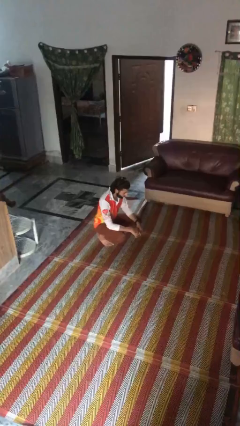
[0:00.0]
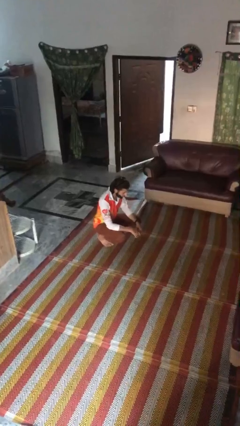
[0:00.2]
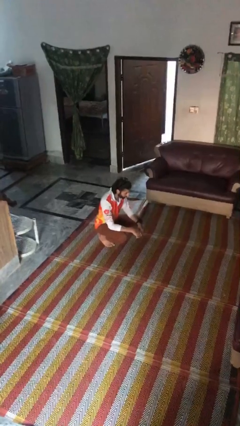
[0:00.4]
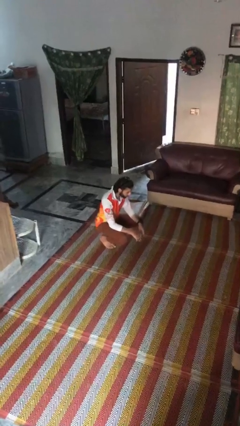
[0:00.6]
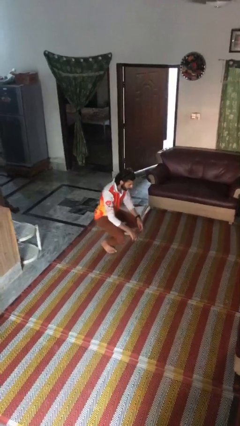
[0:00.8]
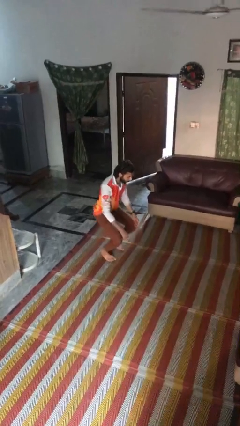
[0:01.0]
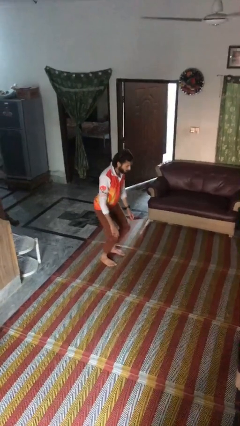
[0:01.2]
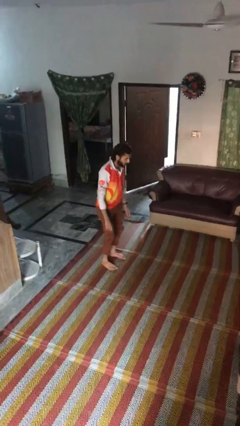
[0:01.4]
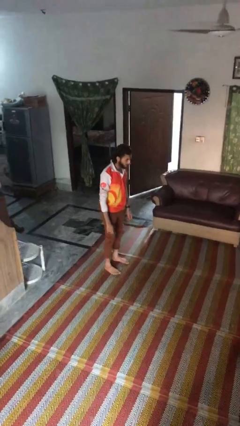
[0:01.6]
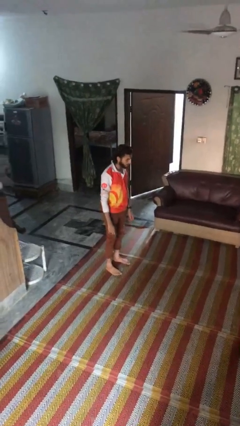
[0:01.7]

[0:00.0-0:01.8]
person stands up

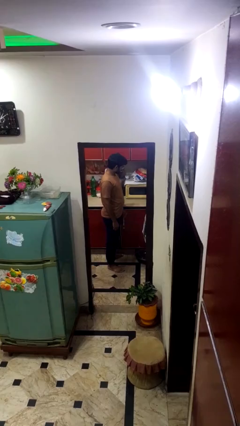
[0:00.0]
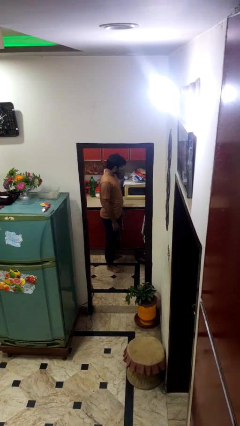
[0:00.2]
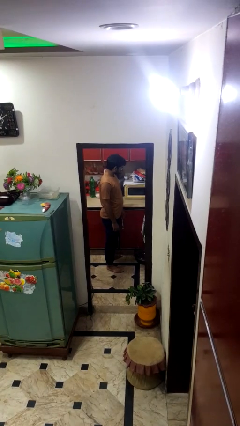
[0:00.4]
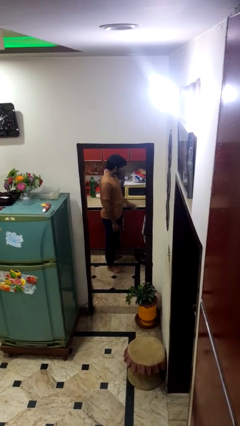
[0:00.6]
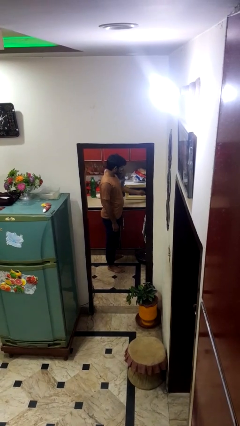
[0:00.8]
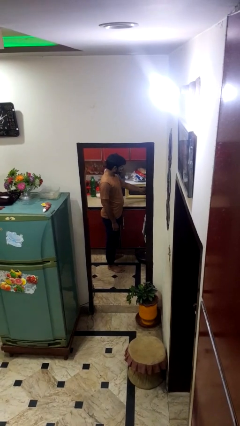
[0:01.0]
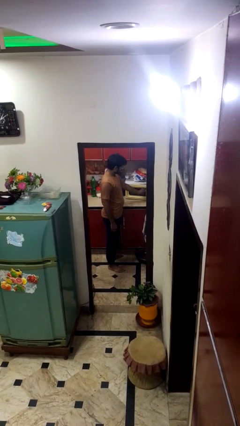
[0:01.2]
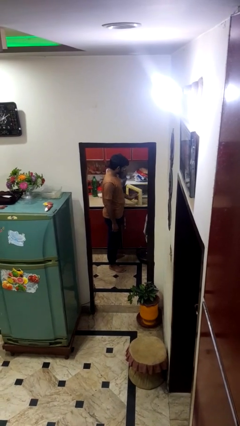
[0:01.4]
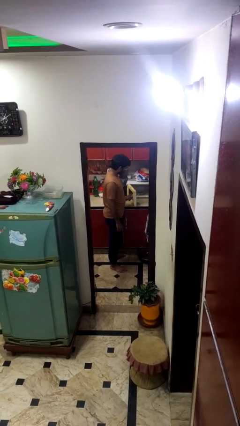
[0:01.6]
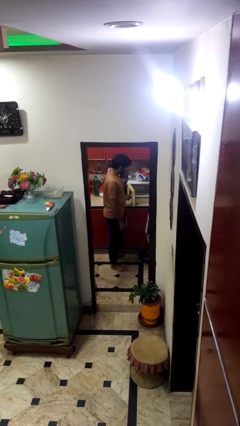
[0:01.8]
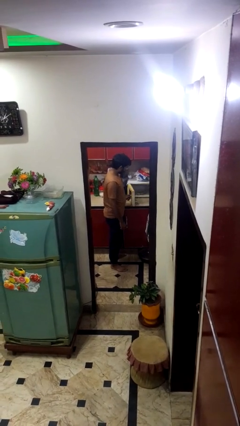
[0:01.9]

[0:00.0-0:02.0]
person opens microwave

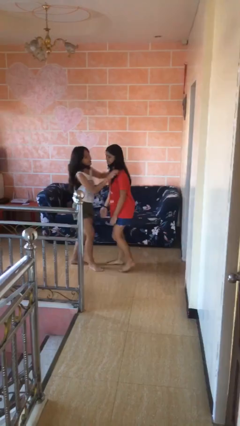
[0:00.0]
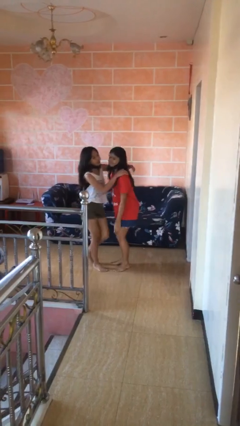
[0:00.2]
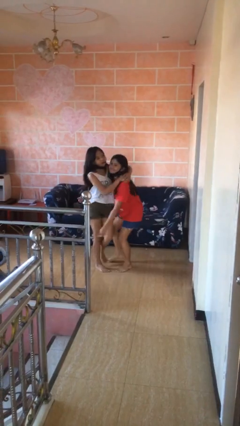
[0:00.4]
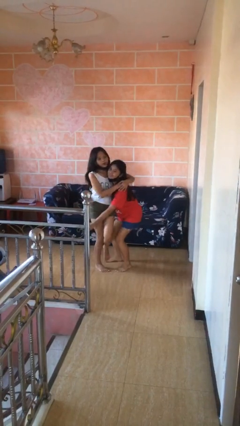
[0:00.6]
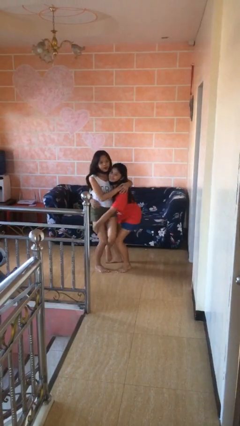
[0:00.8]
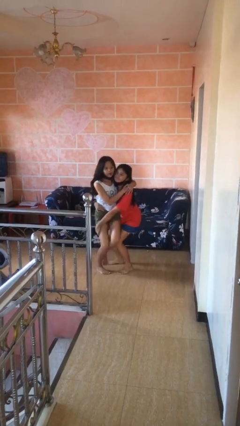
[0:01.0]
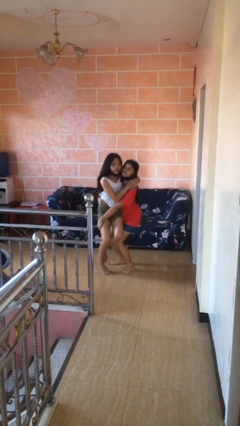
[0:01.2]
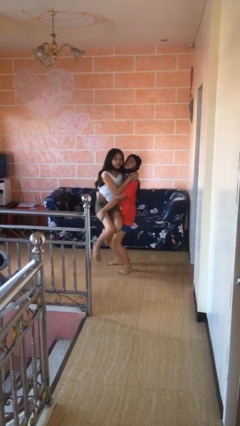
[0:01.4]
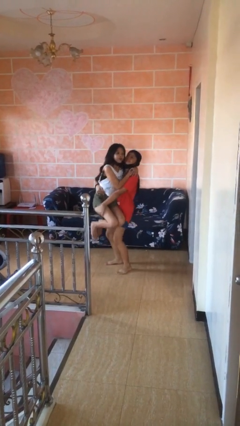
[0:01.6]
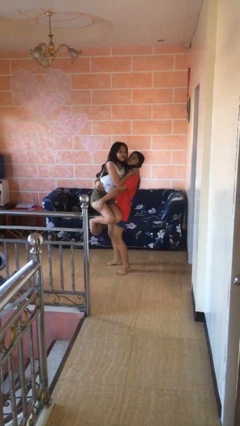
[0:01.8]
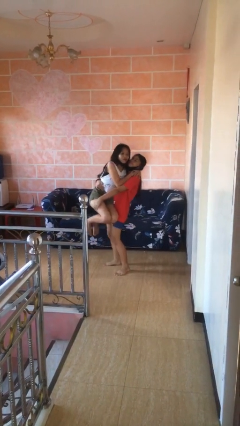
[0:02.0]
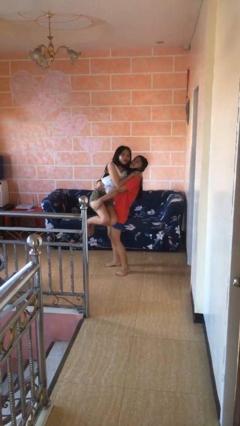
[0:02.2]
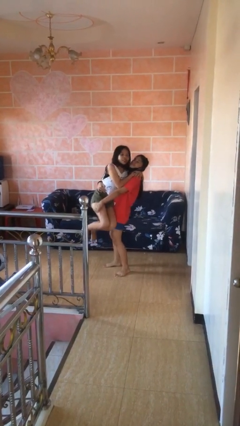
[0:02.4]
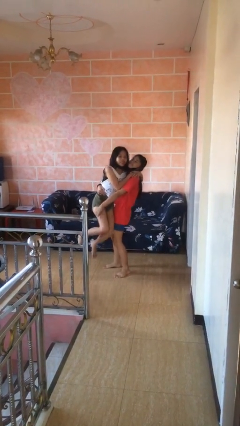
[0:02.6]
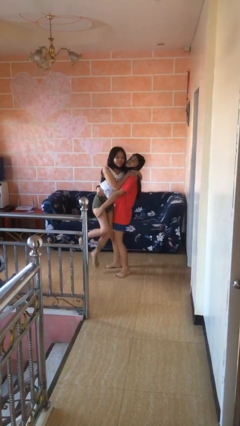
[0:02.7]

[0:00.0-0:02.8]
person picks up person

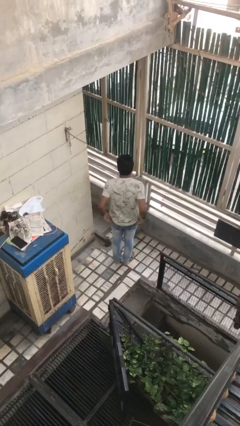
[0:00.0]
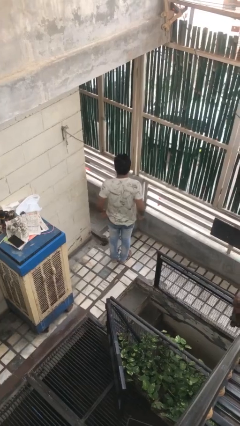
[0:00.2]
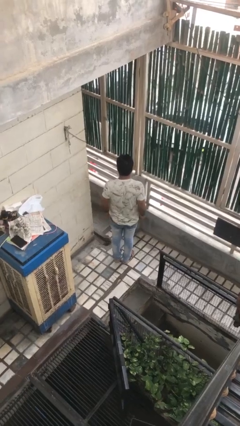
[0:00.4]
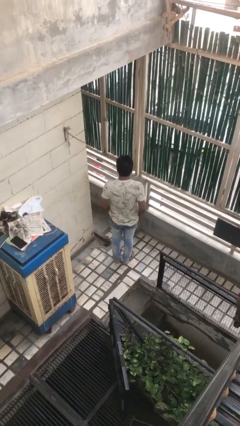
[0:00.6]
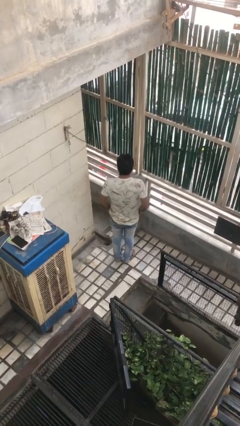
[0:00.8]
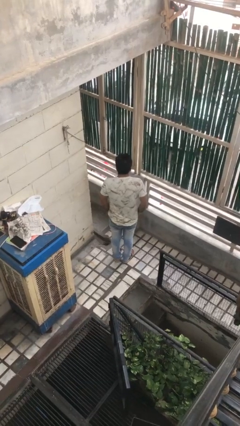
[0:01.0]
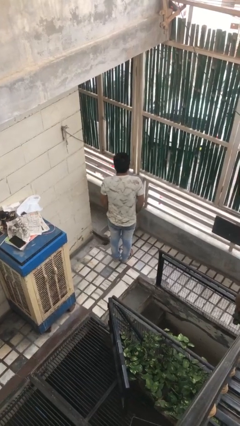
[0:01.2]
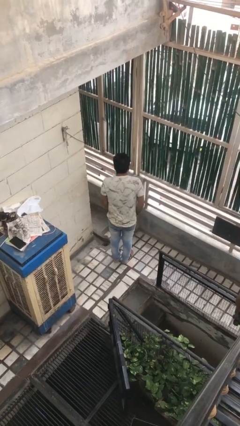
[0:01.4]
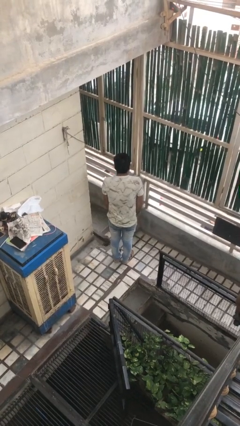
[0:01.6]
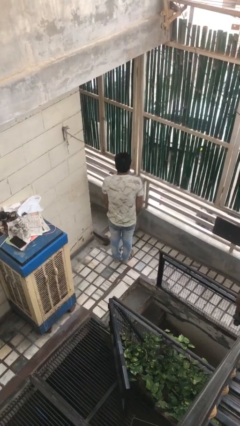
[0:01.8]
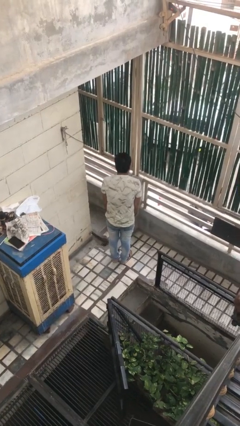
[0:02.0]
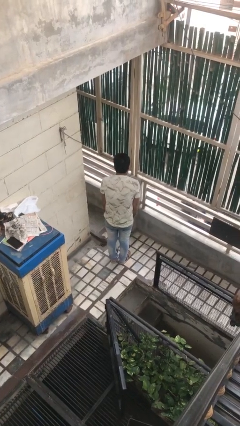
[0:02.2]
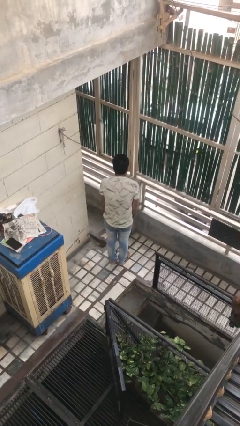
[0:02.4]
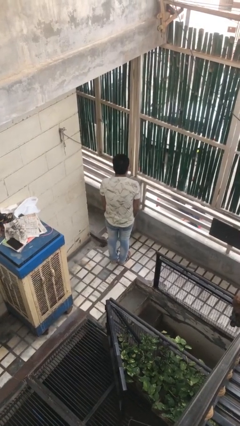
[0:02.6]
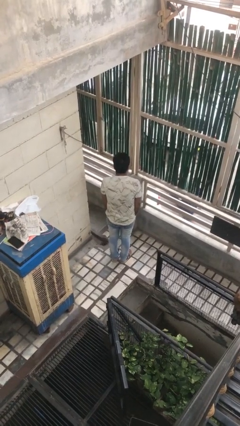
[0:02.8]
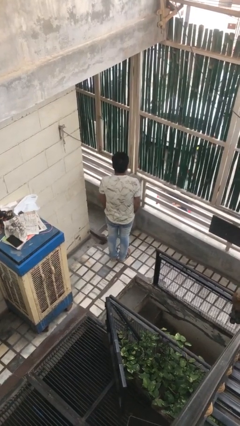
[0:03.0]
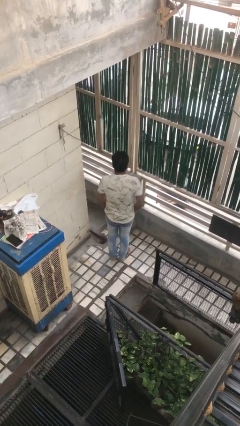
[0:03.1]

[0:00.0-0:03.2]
person puts hands in back pockets

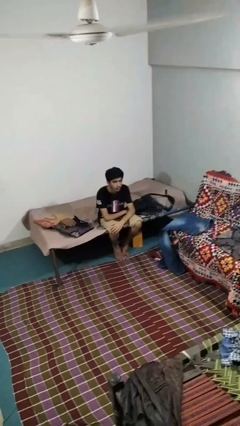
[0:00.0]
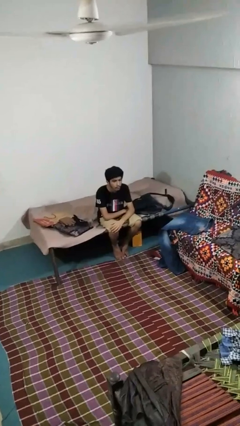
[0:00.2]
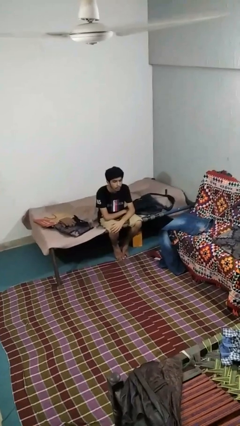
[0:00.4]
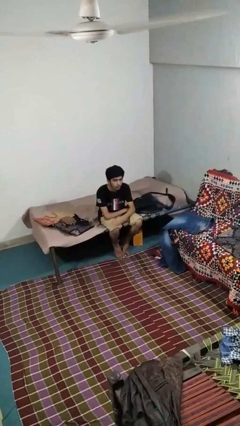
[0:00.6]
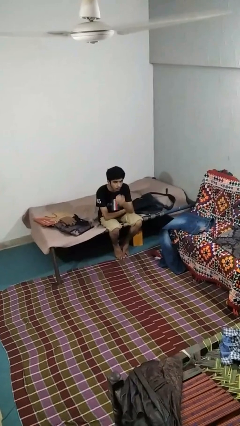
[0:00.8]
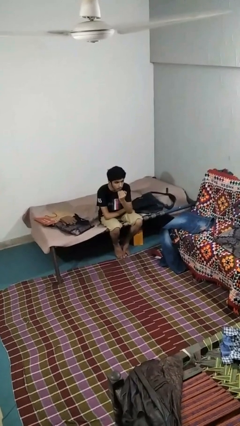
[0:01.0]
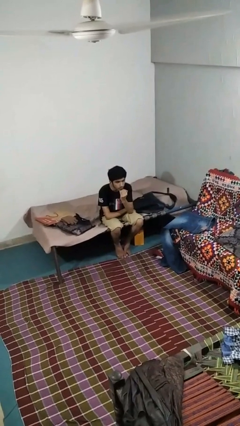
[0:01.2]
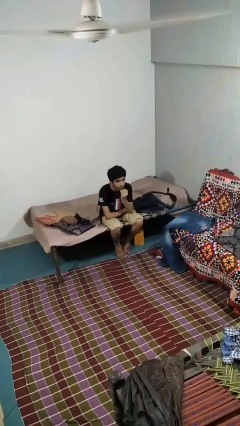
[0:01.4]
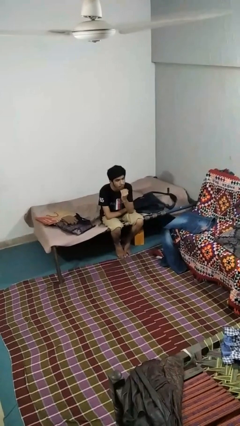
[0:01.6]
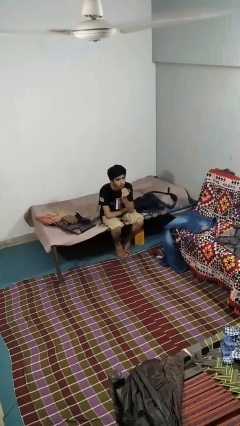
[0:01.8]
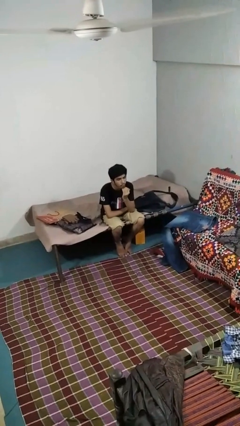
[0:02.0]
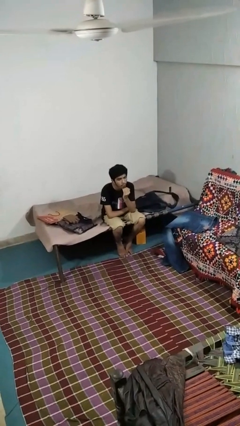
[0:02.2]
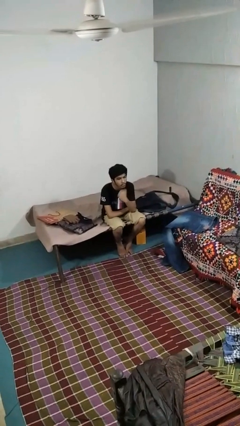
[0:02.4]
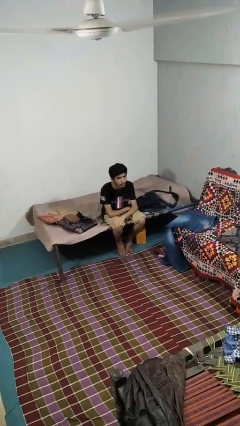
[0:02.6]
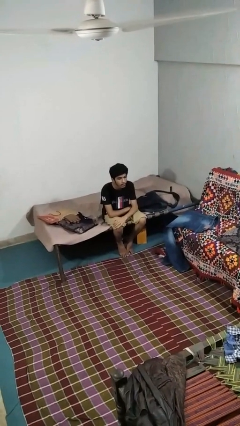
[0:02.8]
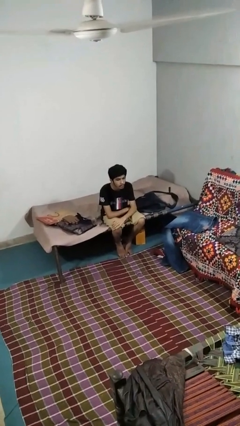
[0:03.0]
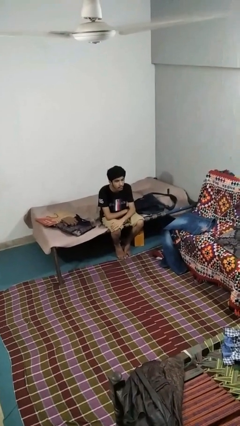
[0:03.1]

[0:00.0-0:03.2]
person strokes chin

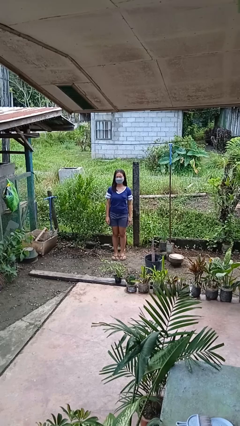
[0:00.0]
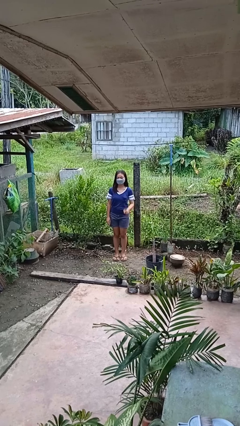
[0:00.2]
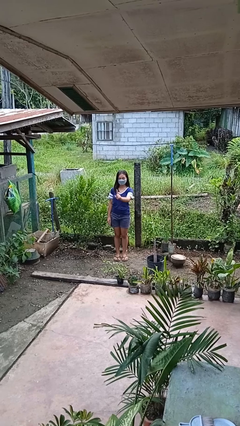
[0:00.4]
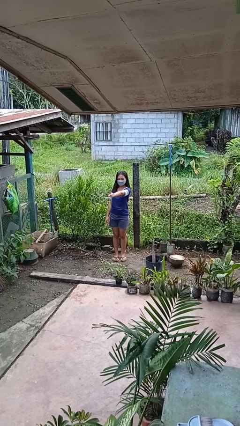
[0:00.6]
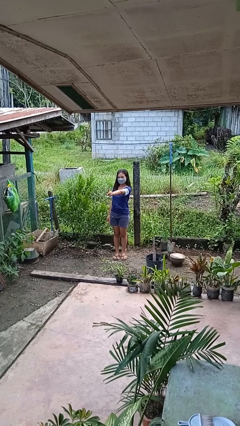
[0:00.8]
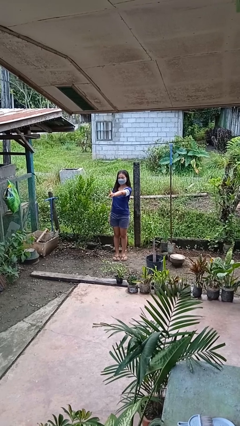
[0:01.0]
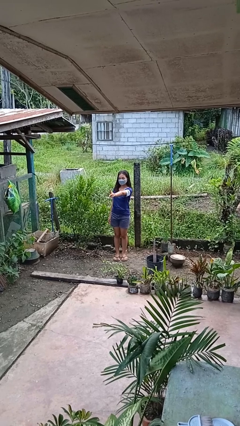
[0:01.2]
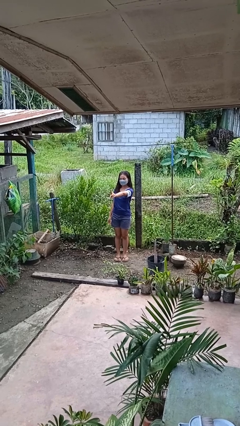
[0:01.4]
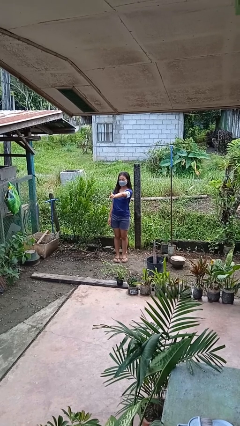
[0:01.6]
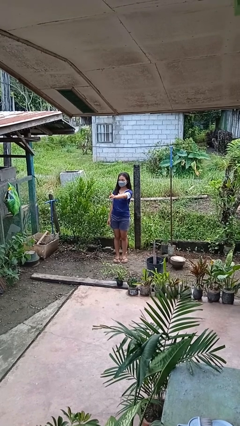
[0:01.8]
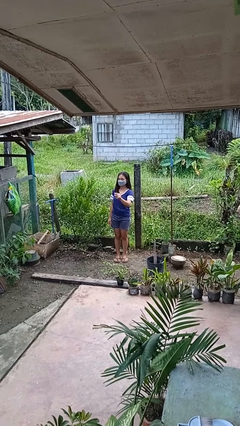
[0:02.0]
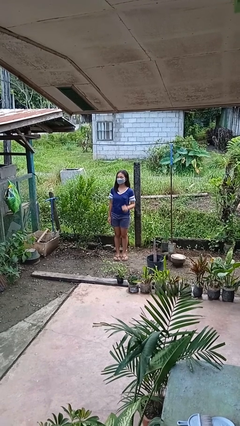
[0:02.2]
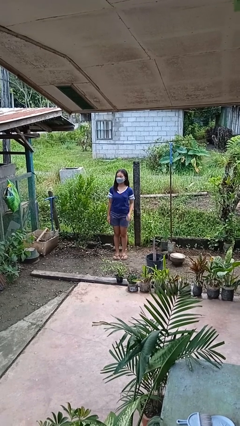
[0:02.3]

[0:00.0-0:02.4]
person gestures number one

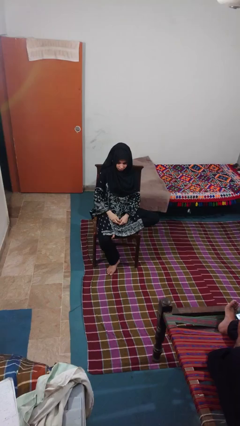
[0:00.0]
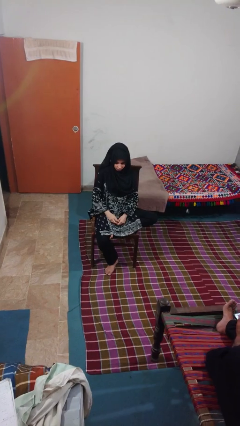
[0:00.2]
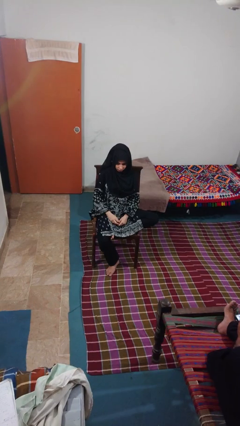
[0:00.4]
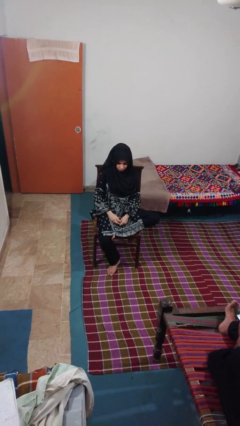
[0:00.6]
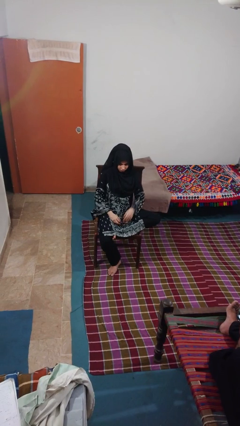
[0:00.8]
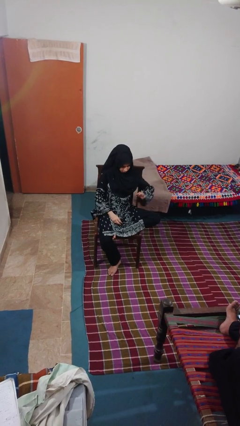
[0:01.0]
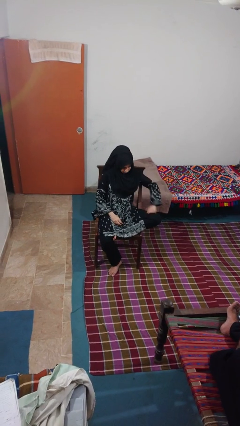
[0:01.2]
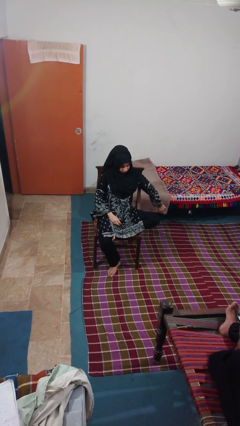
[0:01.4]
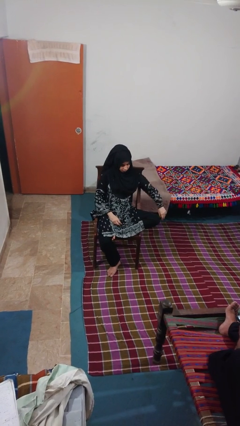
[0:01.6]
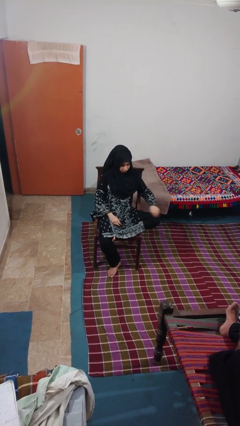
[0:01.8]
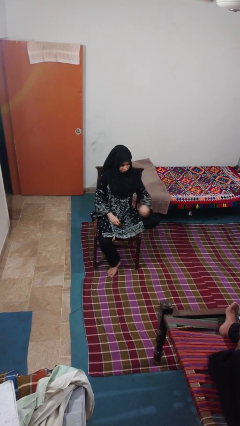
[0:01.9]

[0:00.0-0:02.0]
person swats bug

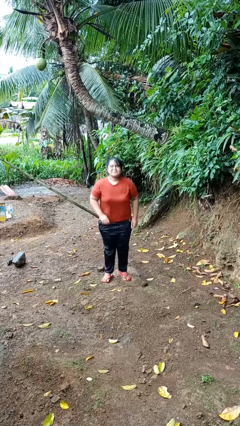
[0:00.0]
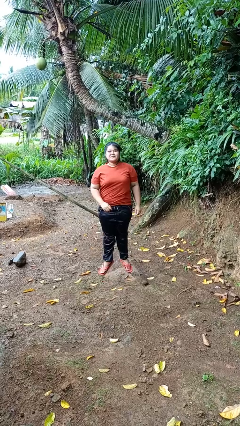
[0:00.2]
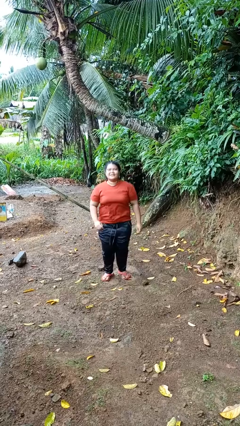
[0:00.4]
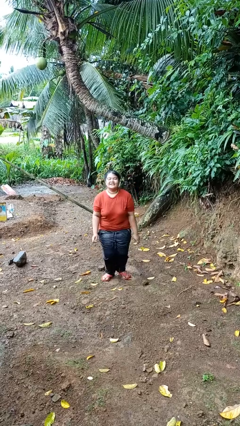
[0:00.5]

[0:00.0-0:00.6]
person jumps
